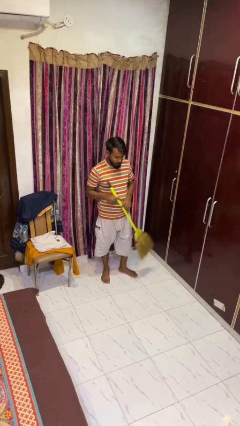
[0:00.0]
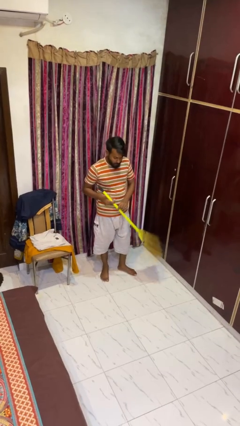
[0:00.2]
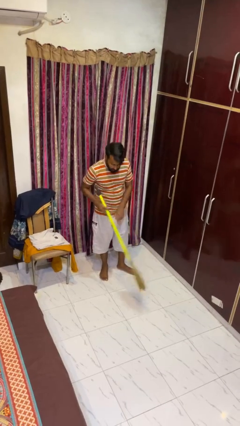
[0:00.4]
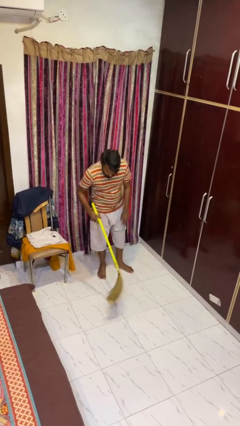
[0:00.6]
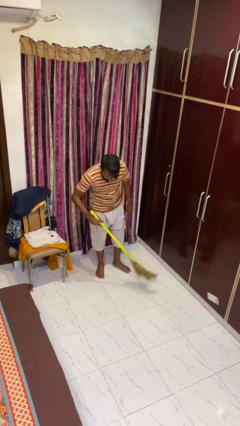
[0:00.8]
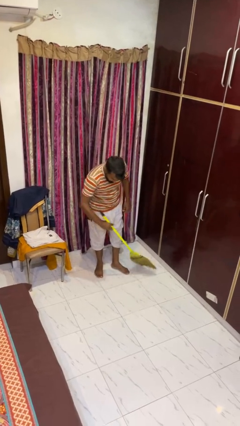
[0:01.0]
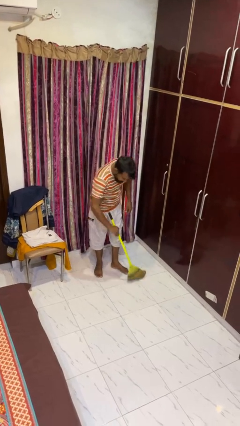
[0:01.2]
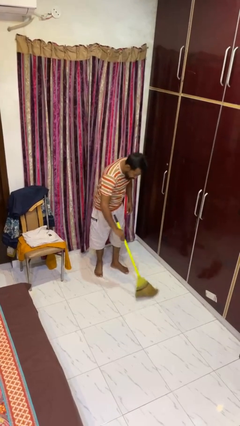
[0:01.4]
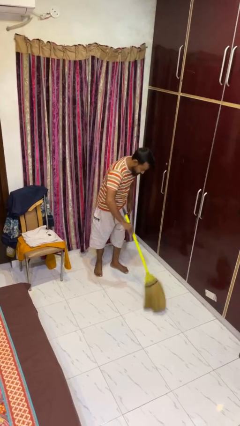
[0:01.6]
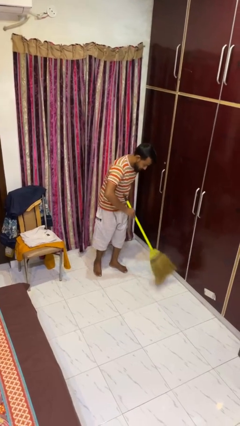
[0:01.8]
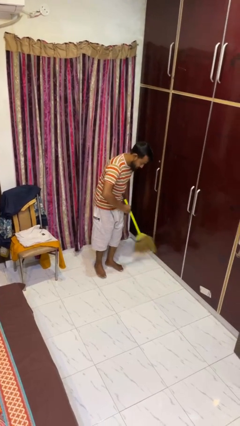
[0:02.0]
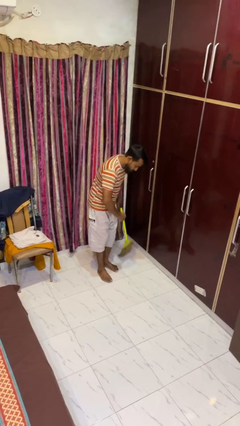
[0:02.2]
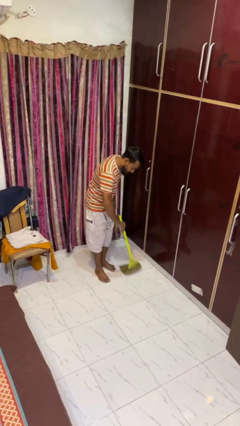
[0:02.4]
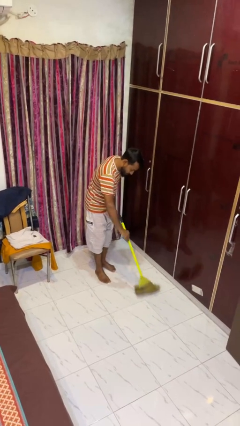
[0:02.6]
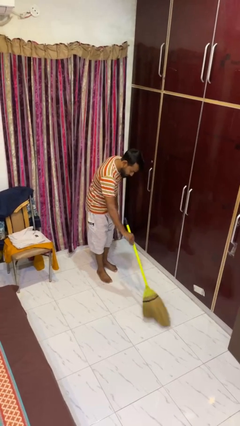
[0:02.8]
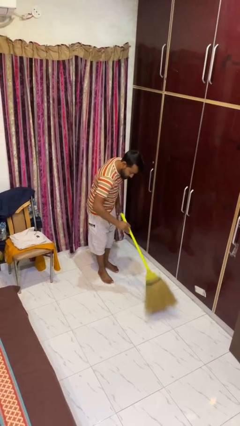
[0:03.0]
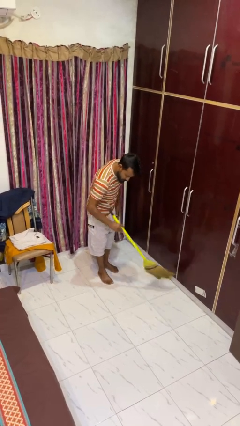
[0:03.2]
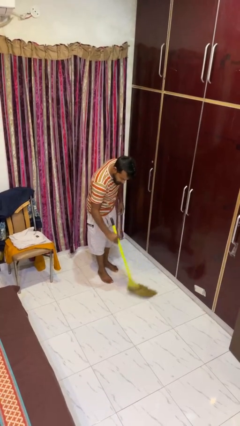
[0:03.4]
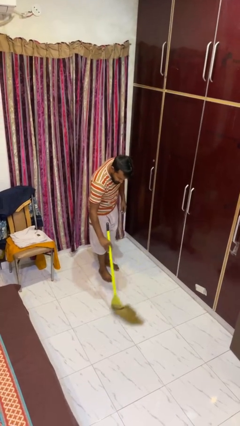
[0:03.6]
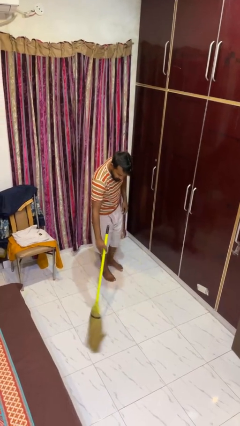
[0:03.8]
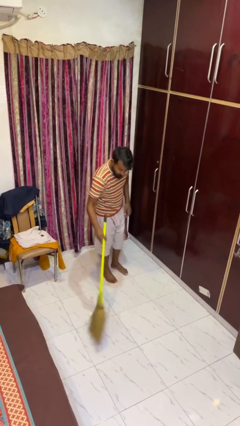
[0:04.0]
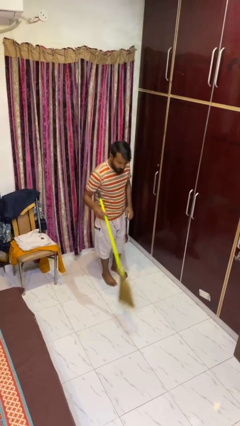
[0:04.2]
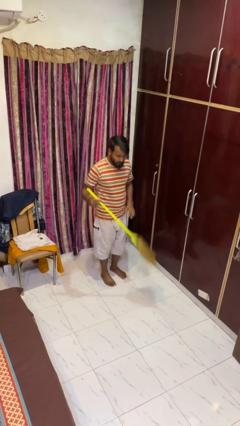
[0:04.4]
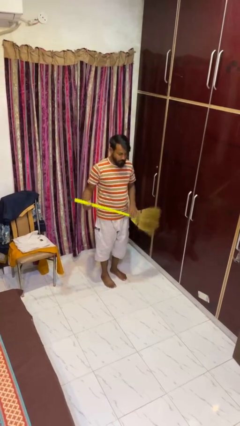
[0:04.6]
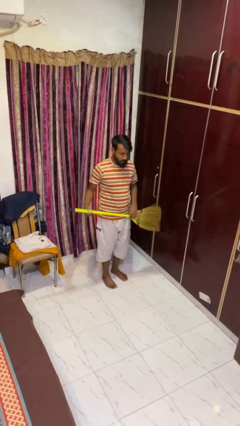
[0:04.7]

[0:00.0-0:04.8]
person sweeps floor

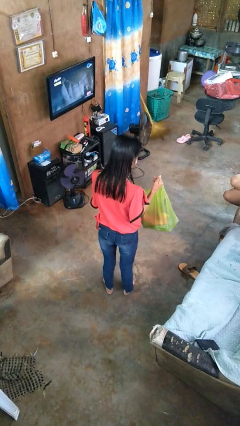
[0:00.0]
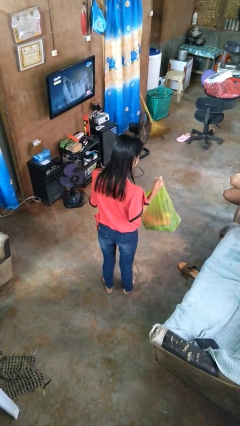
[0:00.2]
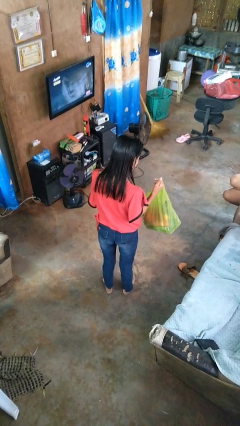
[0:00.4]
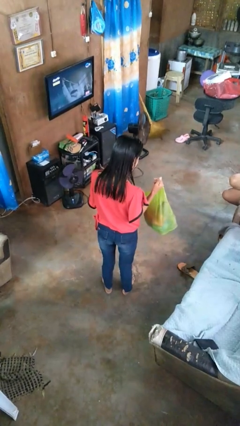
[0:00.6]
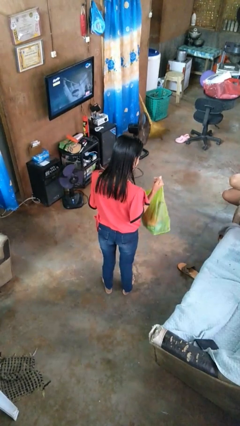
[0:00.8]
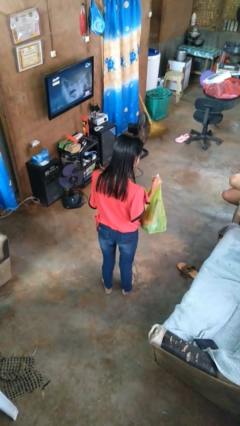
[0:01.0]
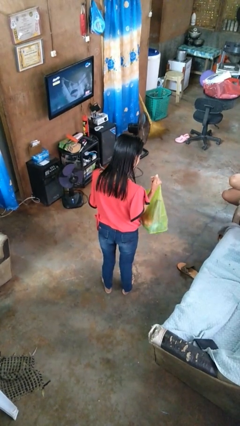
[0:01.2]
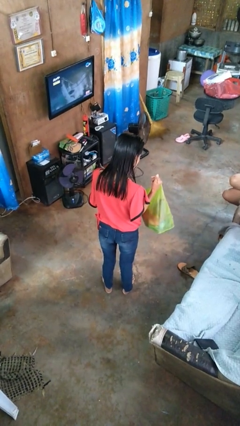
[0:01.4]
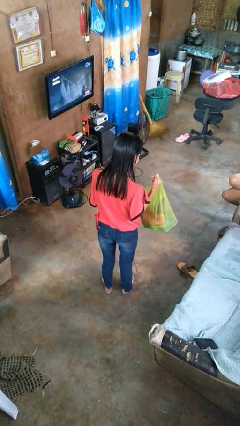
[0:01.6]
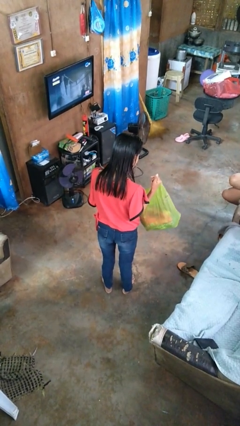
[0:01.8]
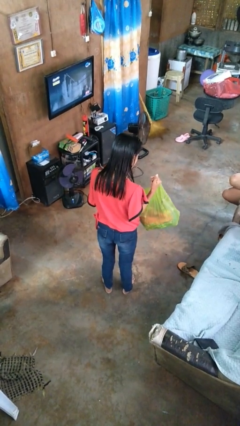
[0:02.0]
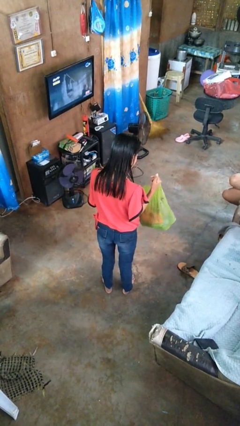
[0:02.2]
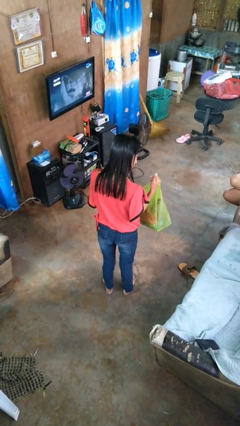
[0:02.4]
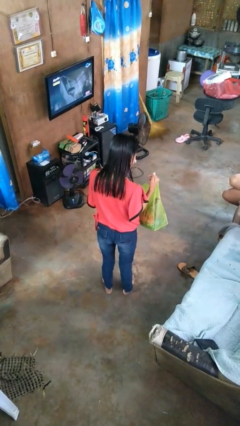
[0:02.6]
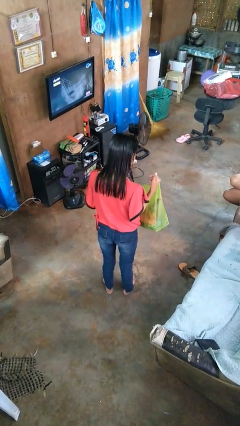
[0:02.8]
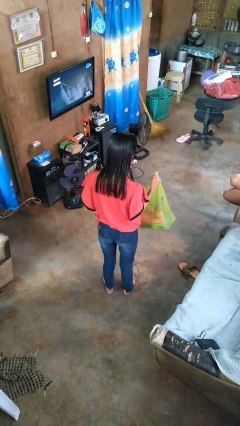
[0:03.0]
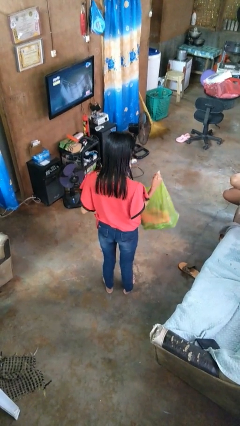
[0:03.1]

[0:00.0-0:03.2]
person searches in bag

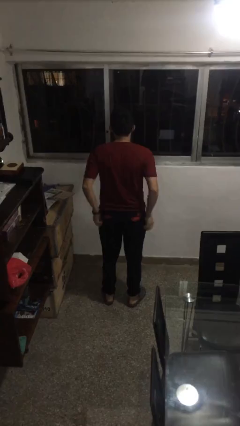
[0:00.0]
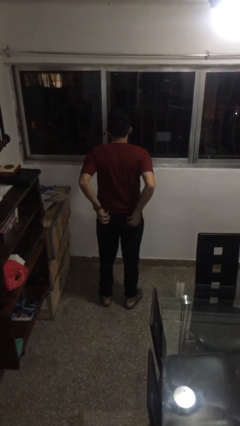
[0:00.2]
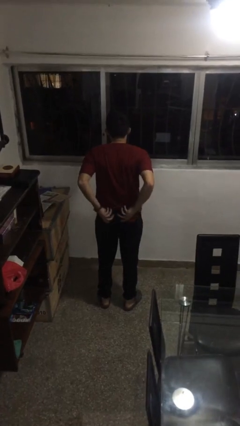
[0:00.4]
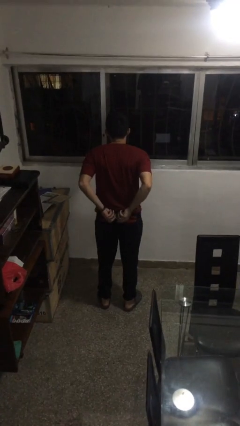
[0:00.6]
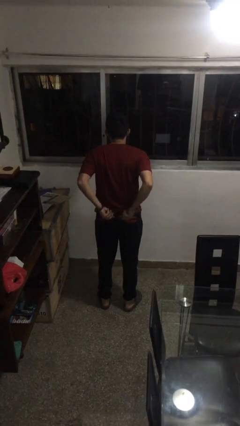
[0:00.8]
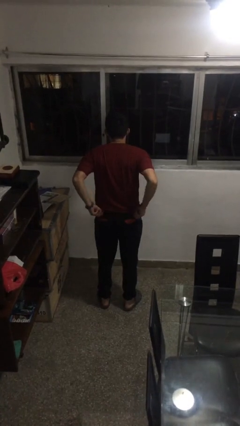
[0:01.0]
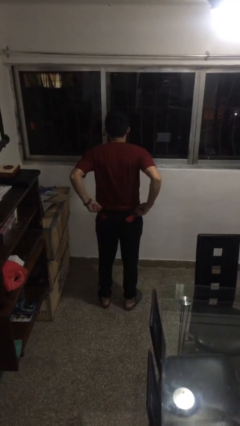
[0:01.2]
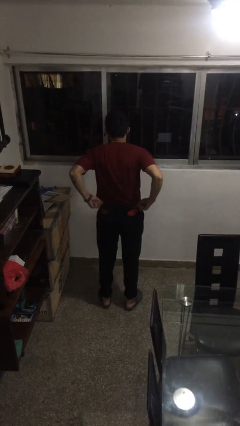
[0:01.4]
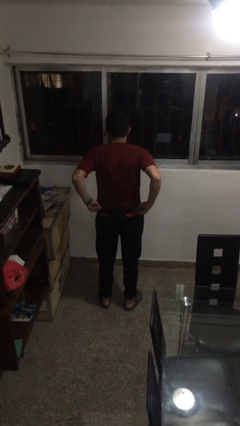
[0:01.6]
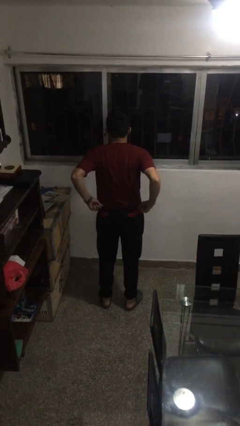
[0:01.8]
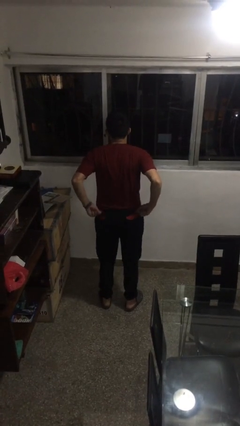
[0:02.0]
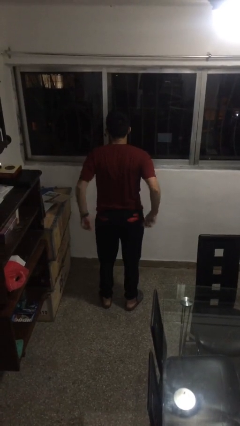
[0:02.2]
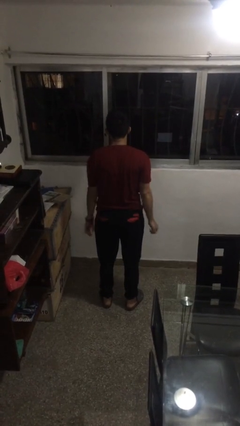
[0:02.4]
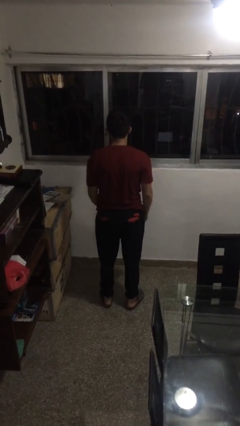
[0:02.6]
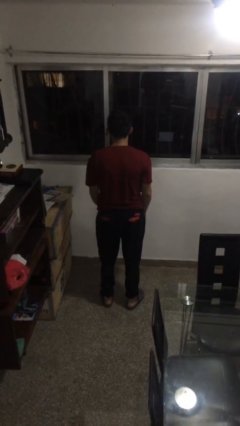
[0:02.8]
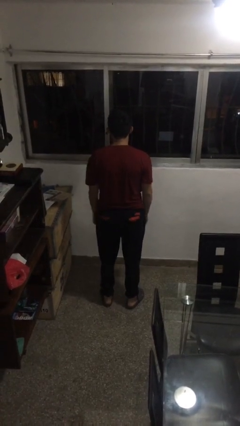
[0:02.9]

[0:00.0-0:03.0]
person hikes up pants

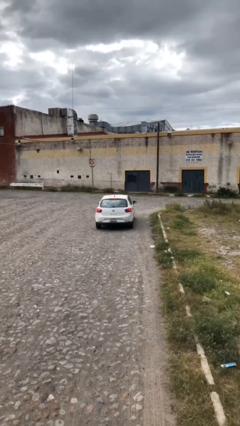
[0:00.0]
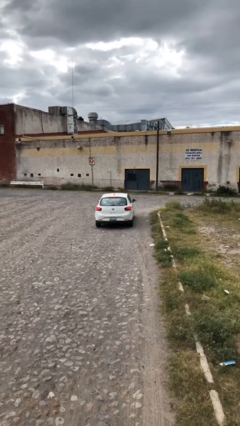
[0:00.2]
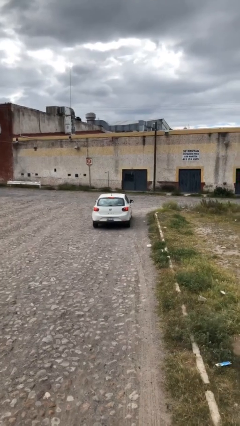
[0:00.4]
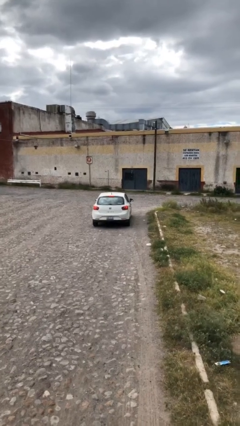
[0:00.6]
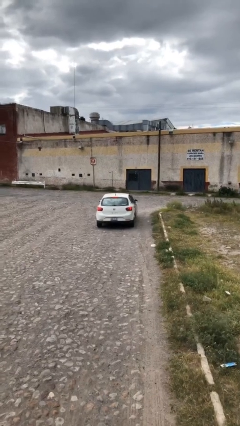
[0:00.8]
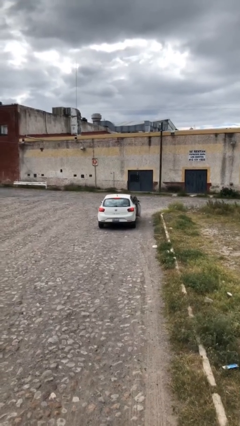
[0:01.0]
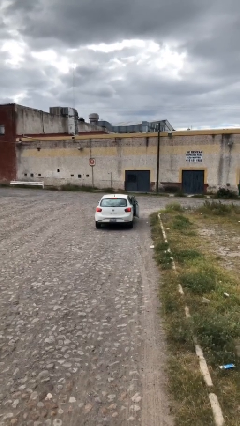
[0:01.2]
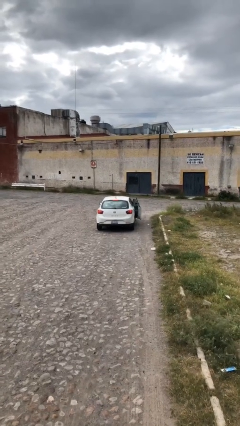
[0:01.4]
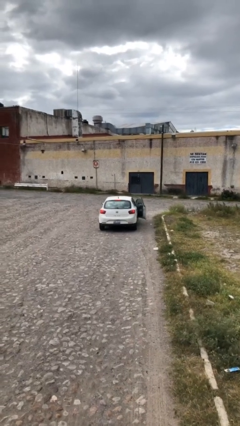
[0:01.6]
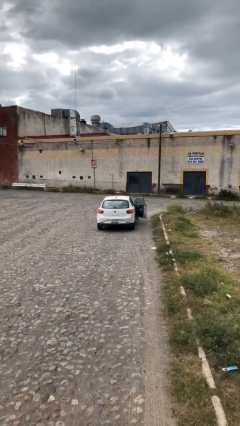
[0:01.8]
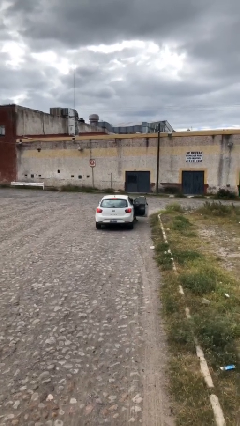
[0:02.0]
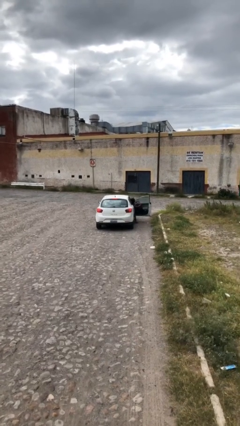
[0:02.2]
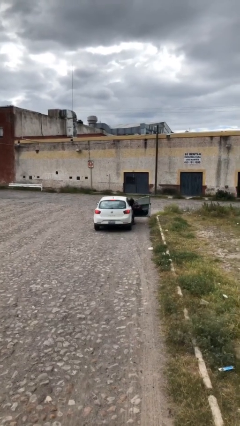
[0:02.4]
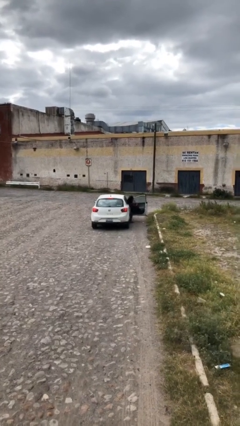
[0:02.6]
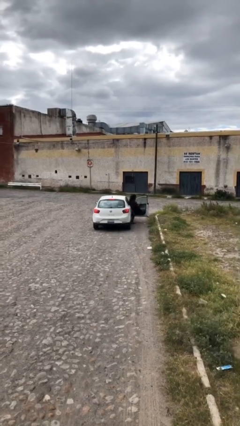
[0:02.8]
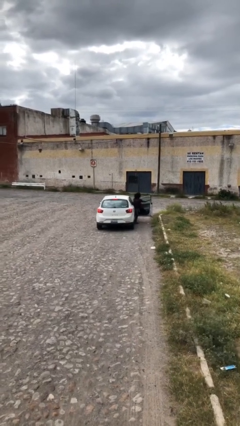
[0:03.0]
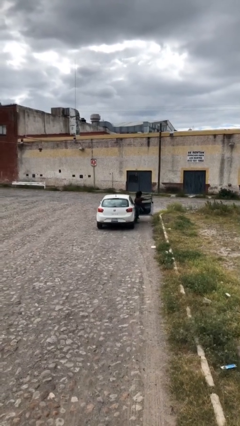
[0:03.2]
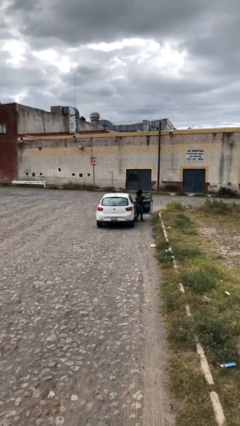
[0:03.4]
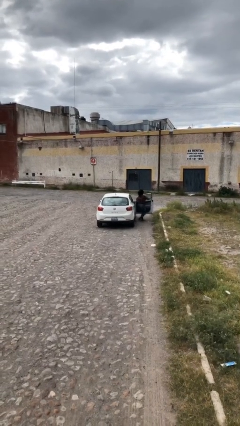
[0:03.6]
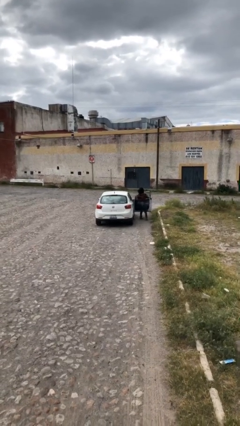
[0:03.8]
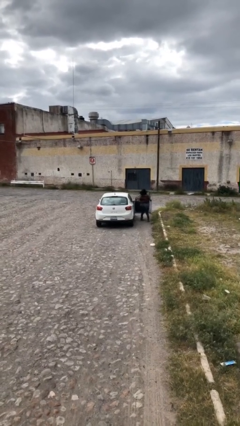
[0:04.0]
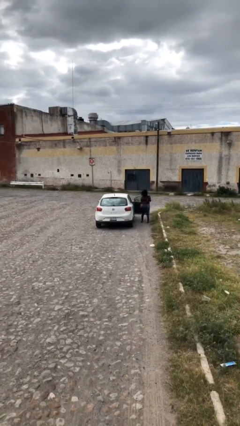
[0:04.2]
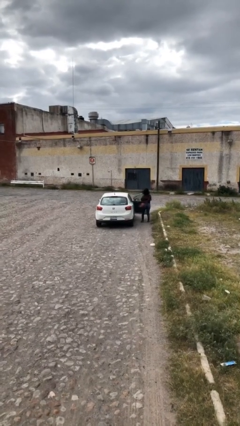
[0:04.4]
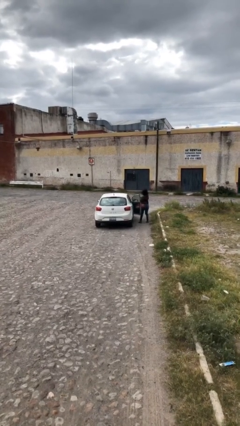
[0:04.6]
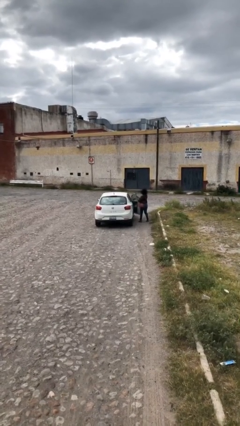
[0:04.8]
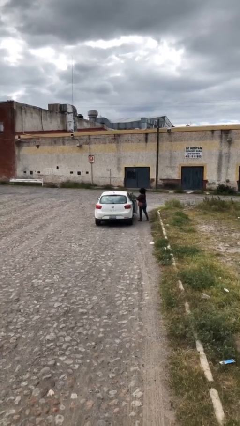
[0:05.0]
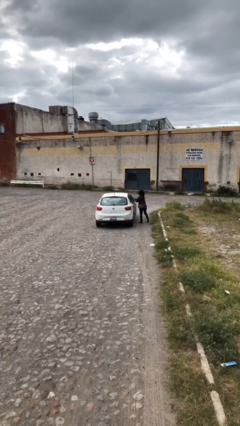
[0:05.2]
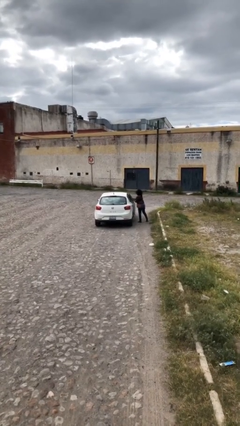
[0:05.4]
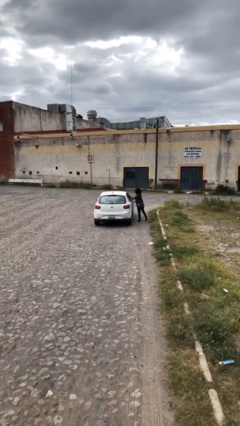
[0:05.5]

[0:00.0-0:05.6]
car drops off person

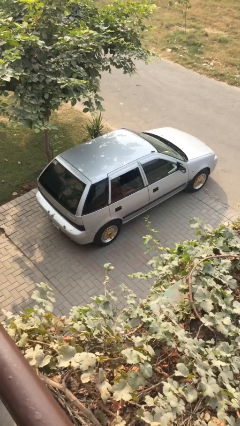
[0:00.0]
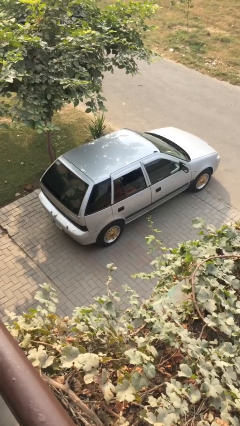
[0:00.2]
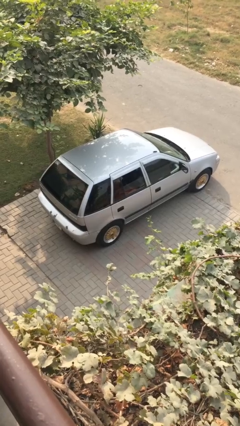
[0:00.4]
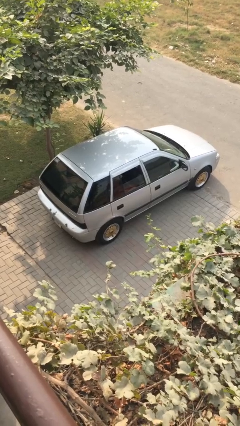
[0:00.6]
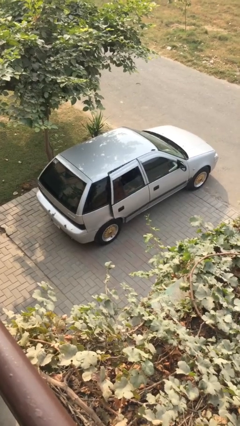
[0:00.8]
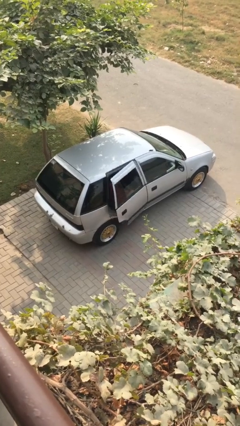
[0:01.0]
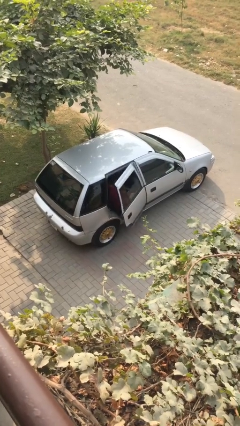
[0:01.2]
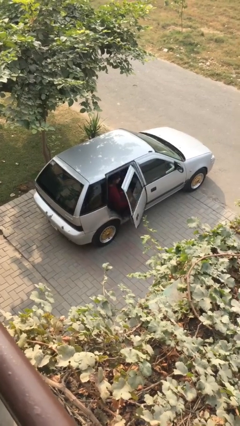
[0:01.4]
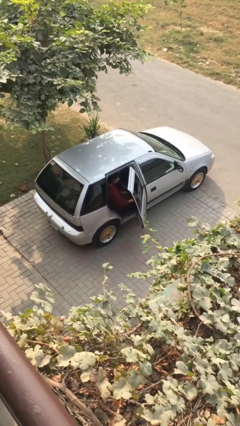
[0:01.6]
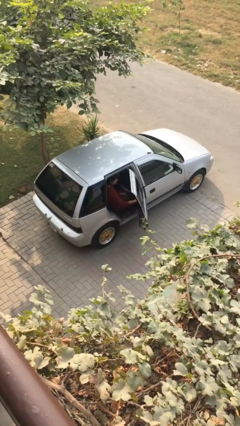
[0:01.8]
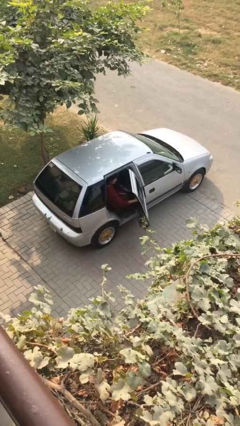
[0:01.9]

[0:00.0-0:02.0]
person opens car door
